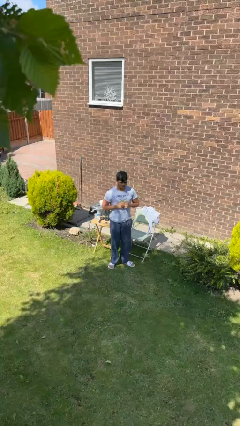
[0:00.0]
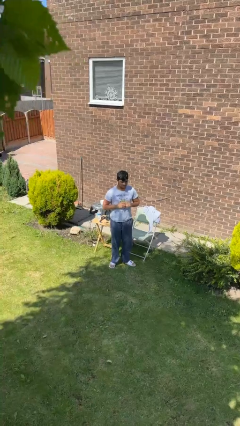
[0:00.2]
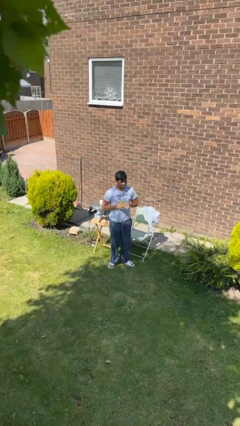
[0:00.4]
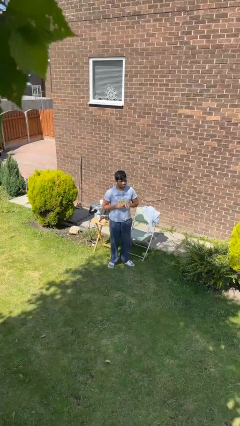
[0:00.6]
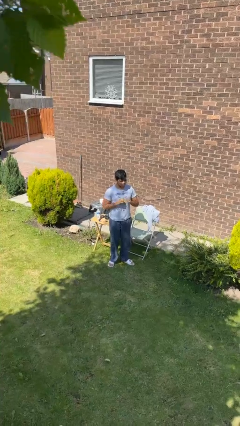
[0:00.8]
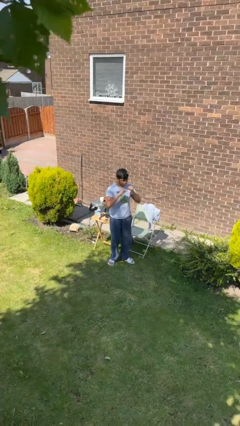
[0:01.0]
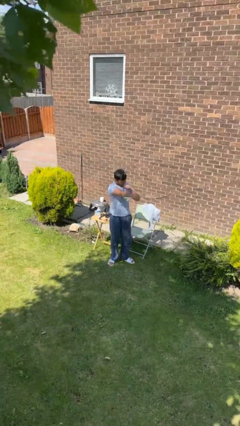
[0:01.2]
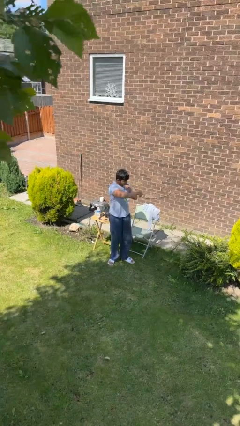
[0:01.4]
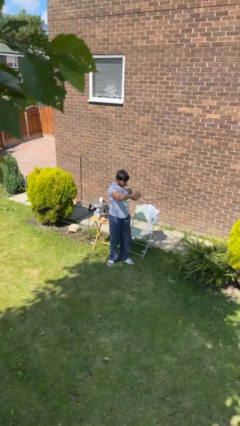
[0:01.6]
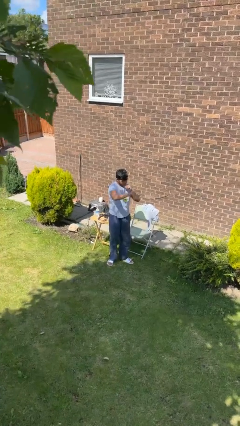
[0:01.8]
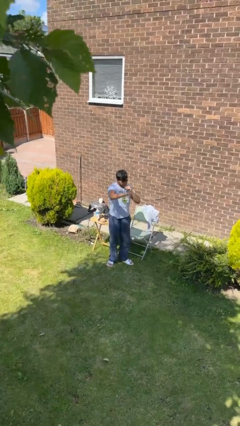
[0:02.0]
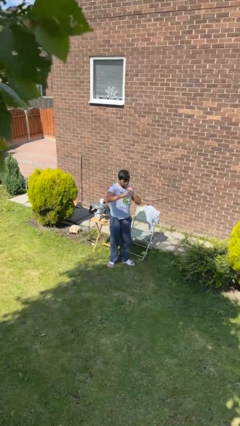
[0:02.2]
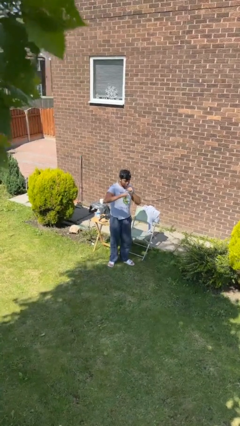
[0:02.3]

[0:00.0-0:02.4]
person punches

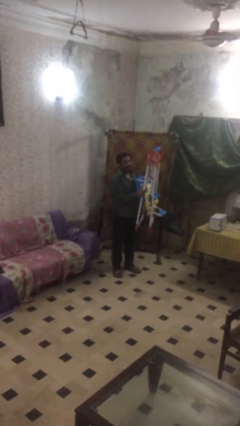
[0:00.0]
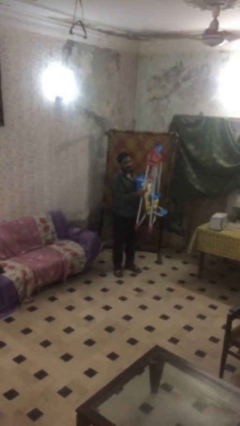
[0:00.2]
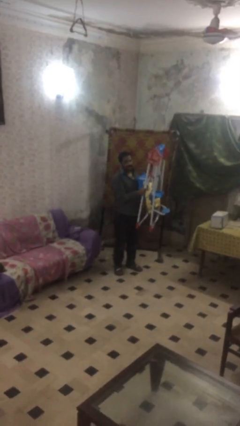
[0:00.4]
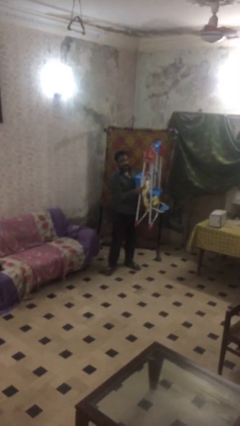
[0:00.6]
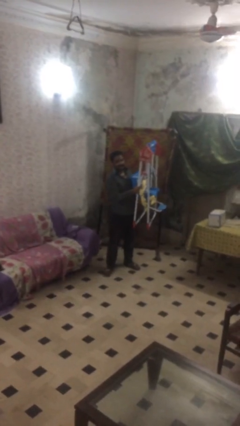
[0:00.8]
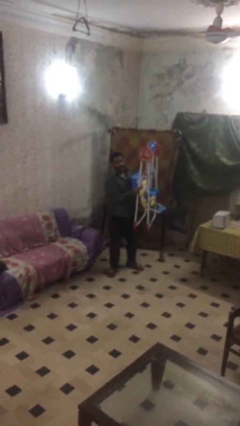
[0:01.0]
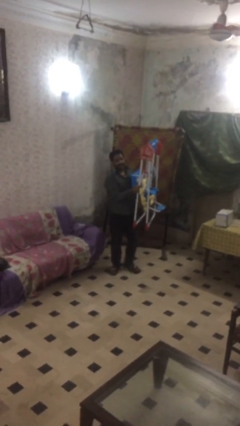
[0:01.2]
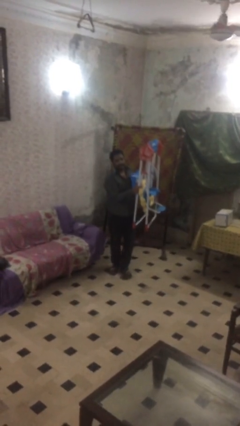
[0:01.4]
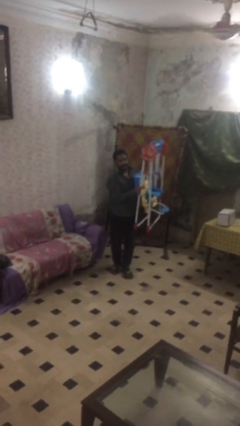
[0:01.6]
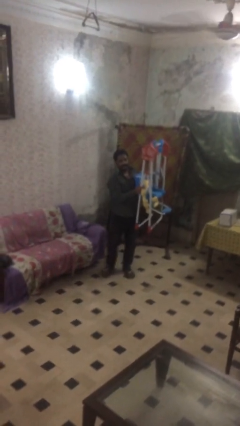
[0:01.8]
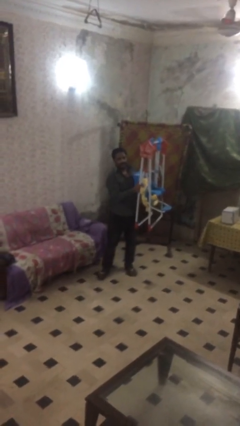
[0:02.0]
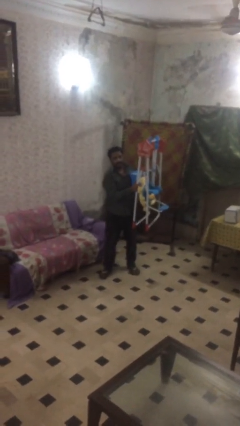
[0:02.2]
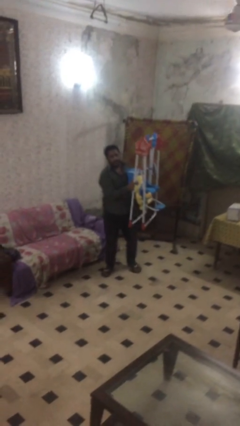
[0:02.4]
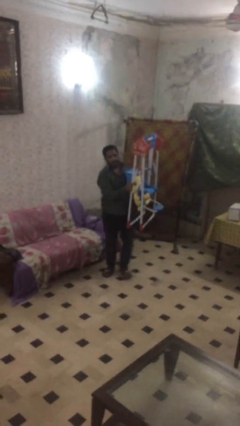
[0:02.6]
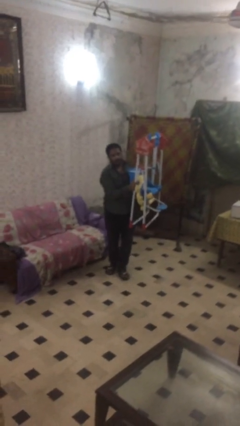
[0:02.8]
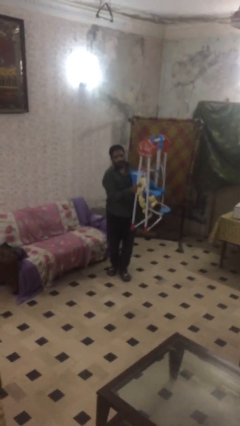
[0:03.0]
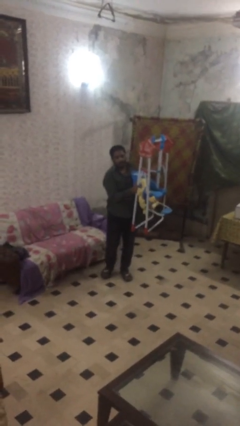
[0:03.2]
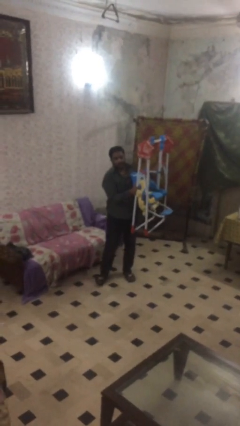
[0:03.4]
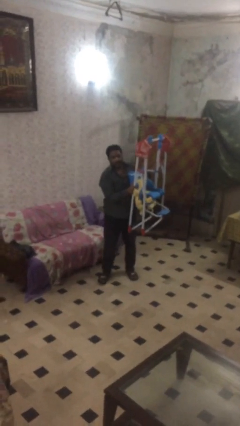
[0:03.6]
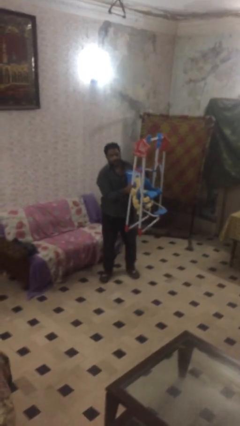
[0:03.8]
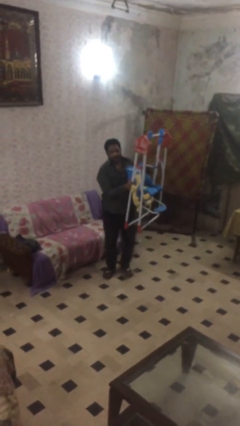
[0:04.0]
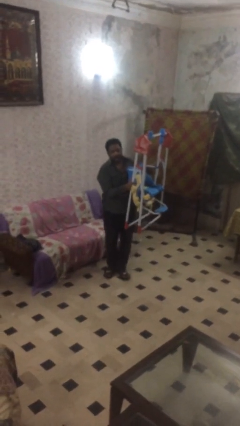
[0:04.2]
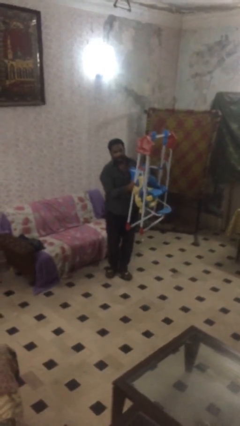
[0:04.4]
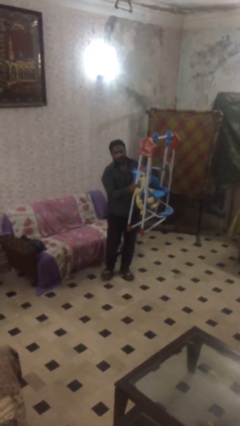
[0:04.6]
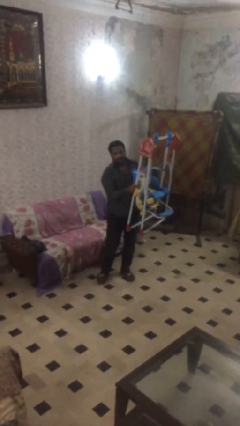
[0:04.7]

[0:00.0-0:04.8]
person carries heavy object

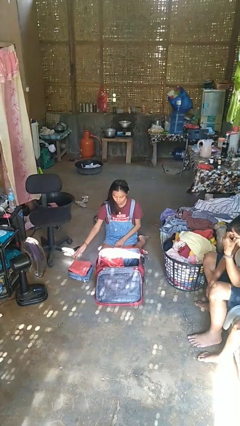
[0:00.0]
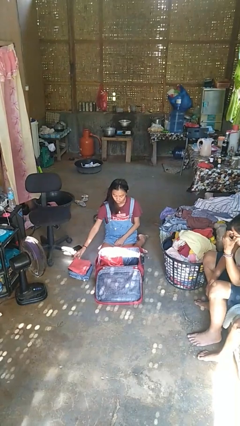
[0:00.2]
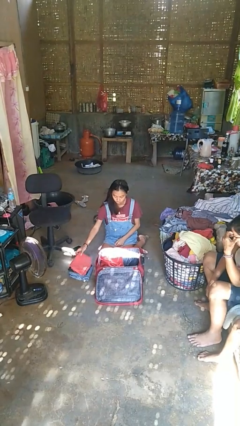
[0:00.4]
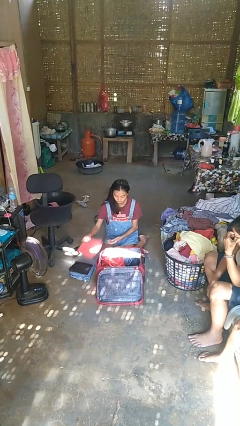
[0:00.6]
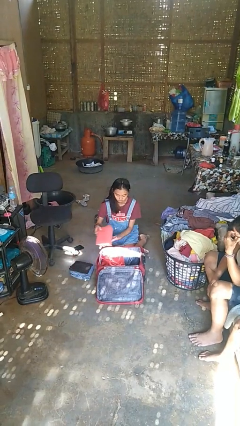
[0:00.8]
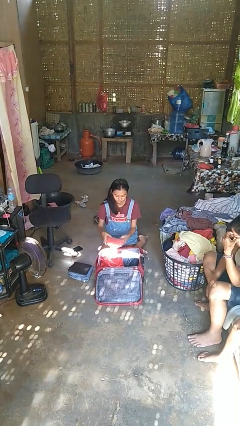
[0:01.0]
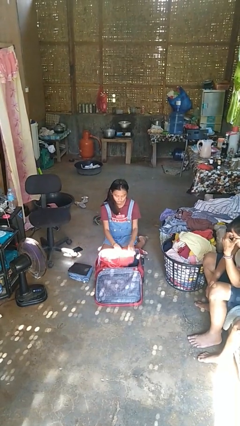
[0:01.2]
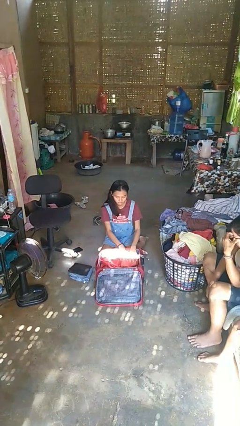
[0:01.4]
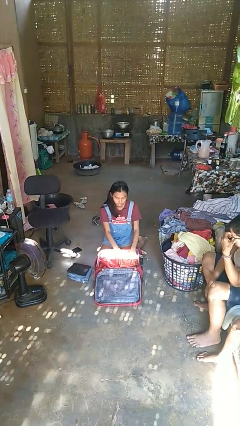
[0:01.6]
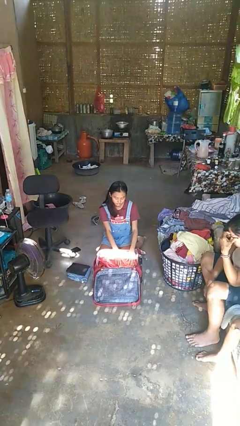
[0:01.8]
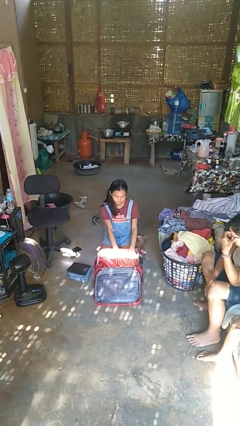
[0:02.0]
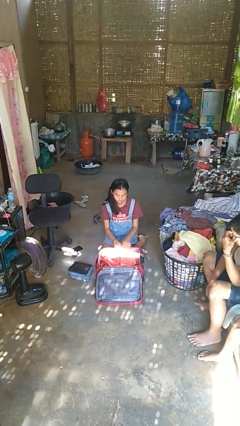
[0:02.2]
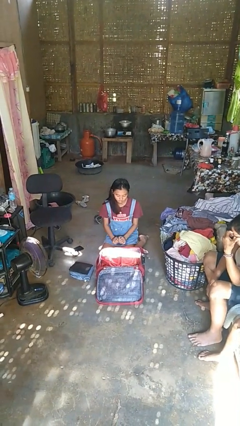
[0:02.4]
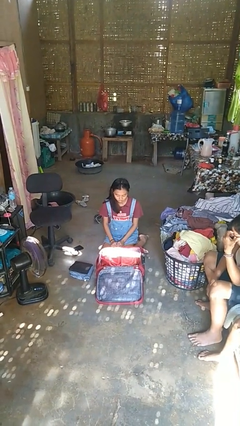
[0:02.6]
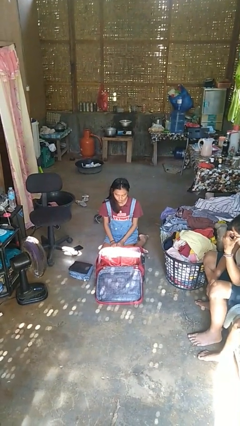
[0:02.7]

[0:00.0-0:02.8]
person loads clothes into suitcase

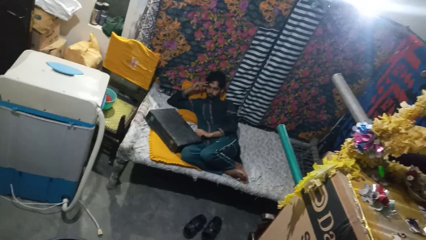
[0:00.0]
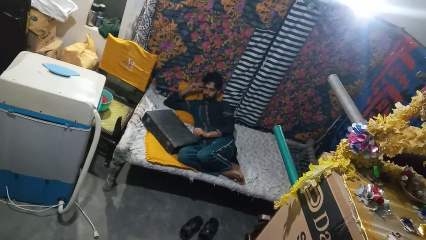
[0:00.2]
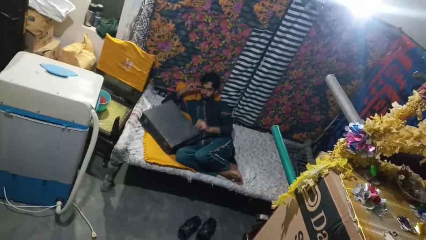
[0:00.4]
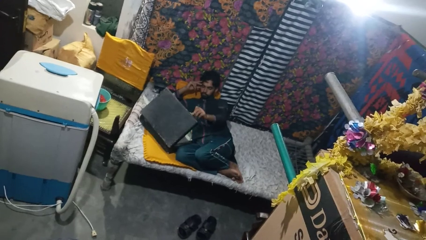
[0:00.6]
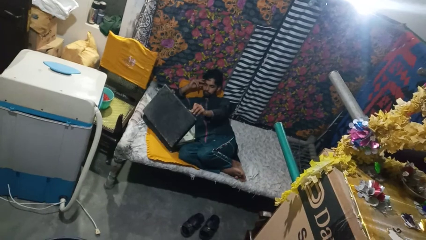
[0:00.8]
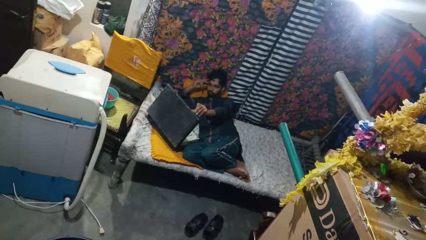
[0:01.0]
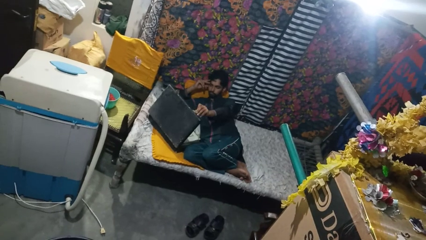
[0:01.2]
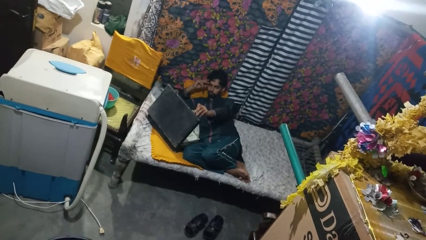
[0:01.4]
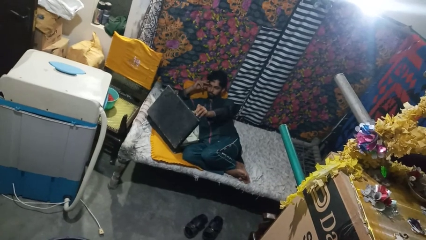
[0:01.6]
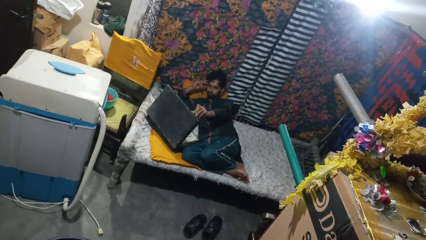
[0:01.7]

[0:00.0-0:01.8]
person opens suitcase

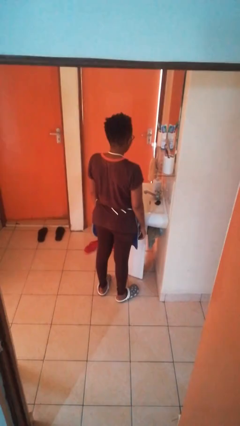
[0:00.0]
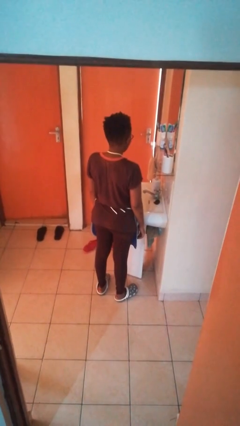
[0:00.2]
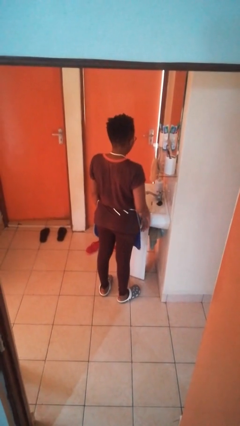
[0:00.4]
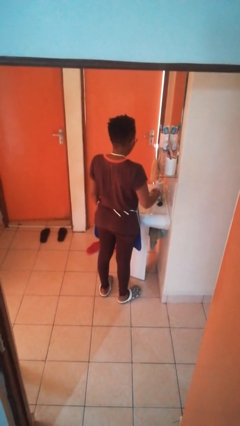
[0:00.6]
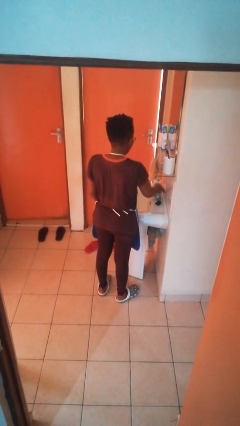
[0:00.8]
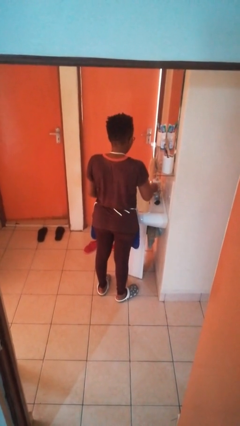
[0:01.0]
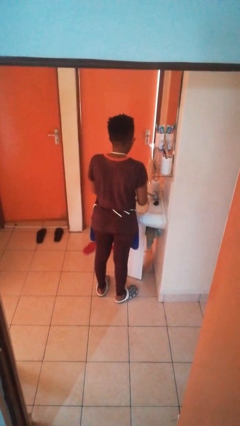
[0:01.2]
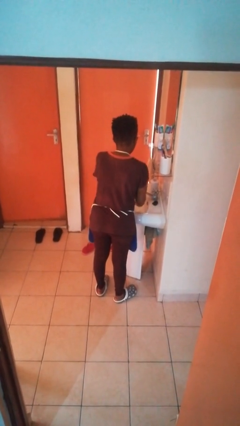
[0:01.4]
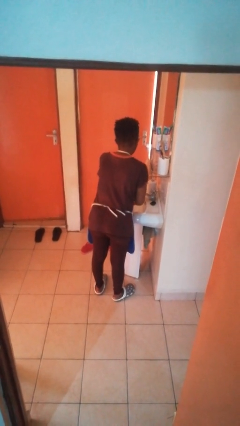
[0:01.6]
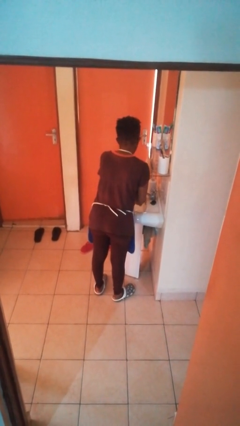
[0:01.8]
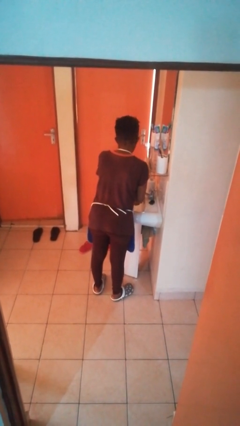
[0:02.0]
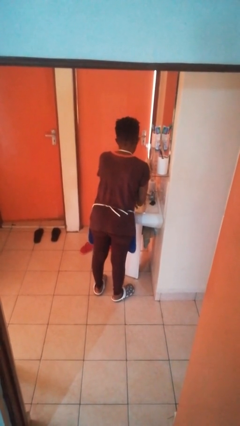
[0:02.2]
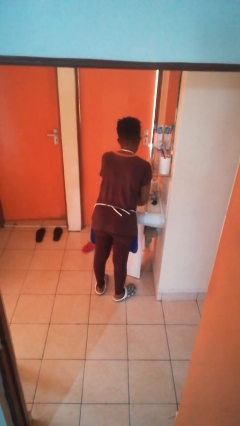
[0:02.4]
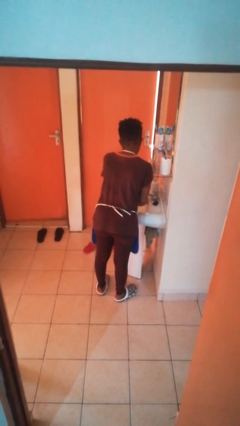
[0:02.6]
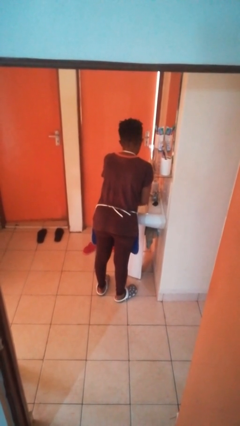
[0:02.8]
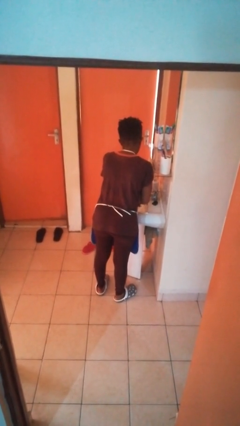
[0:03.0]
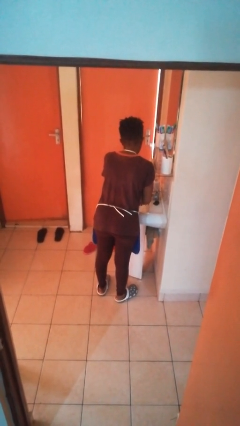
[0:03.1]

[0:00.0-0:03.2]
person washes hands

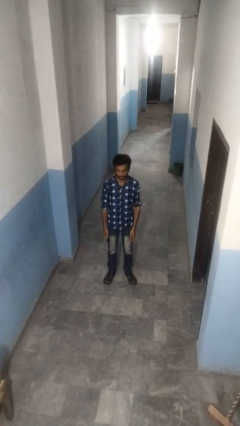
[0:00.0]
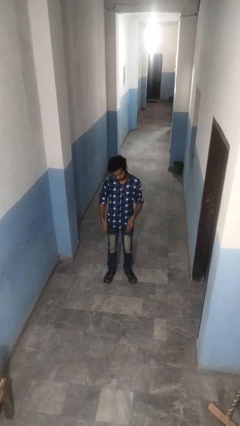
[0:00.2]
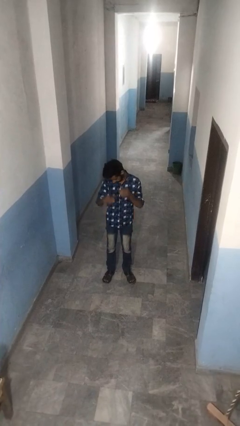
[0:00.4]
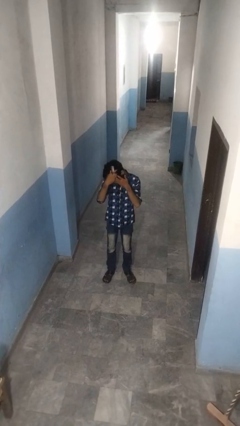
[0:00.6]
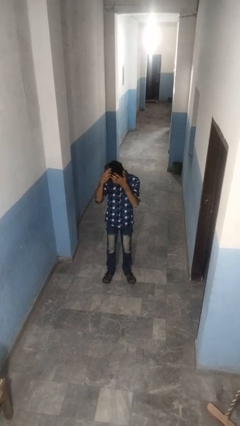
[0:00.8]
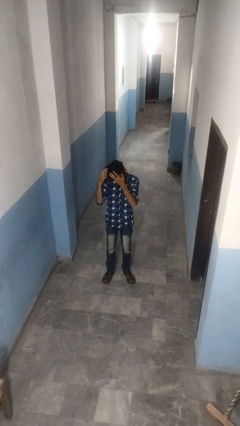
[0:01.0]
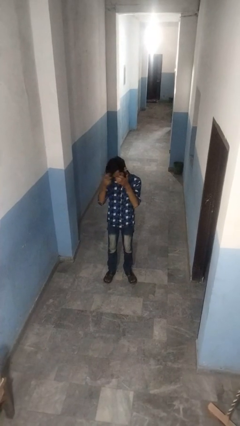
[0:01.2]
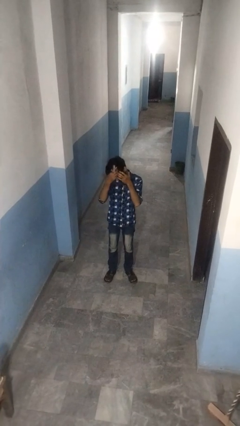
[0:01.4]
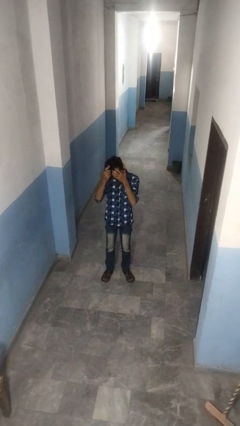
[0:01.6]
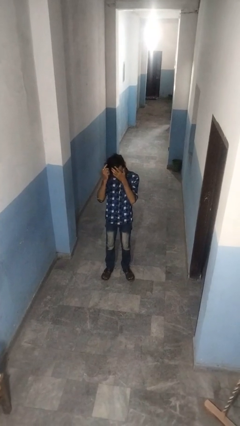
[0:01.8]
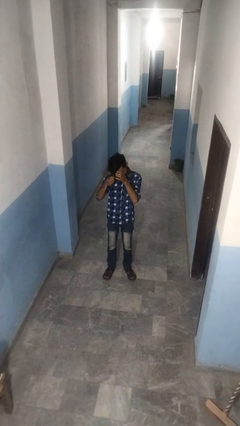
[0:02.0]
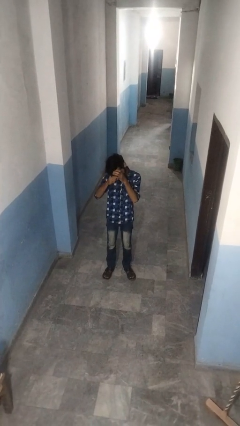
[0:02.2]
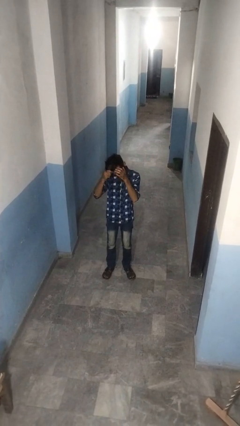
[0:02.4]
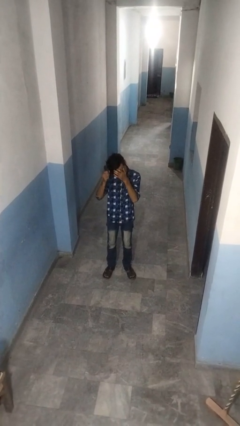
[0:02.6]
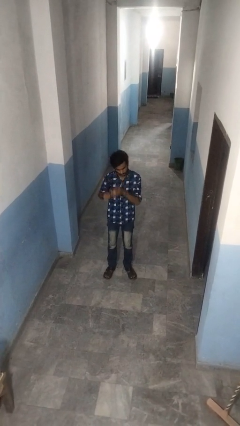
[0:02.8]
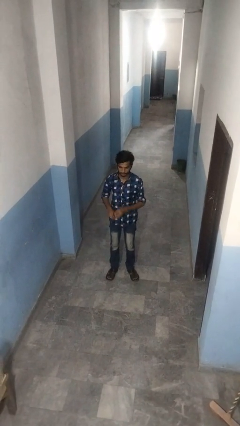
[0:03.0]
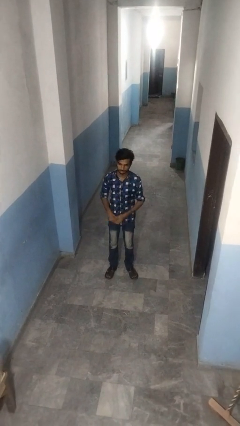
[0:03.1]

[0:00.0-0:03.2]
person brushes hair
